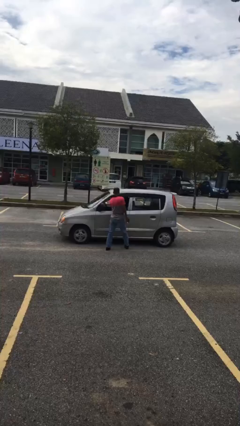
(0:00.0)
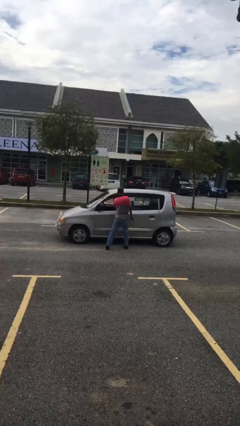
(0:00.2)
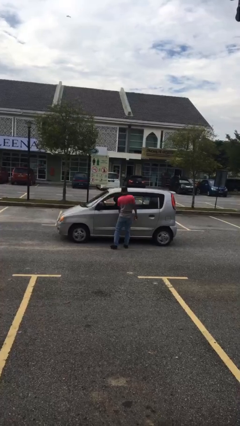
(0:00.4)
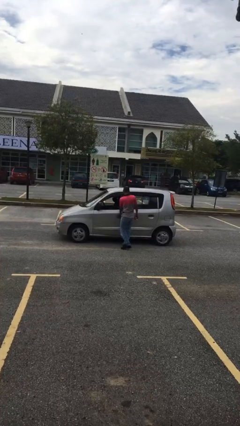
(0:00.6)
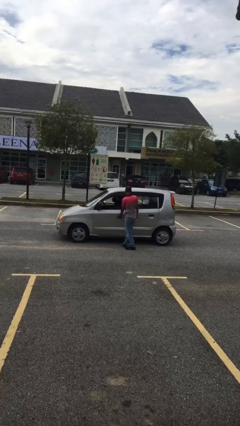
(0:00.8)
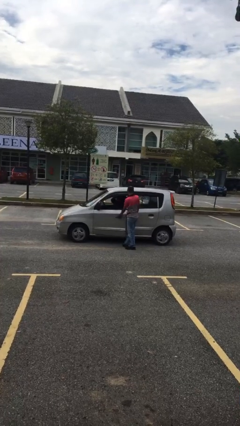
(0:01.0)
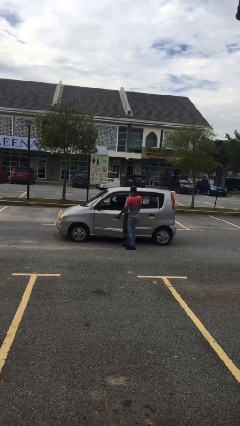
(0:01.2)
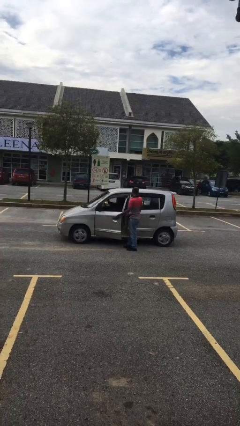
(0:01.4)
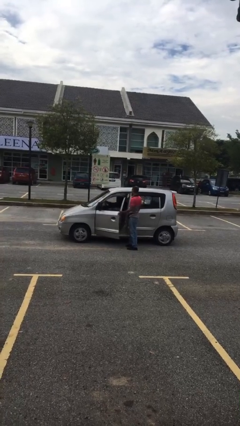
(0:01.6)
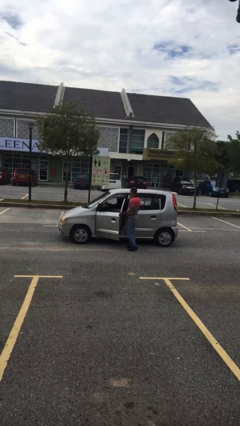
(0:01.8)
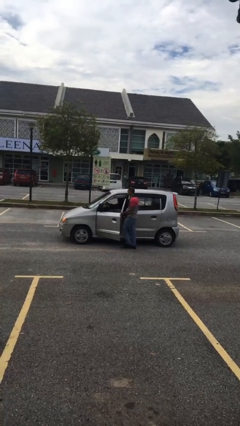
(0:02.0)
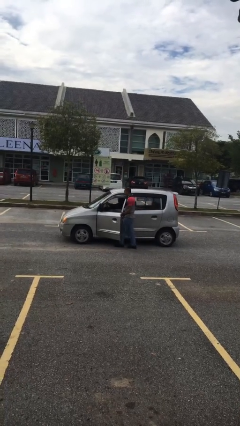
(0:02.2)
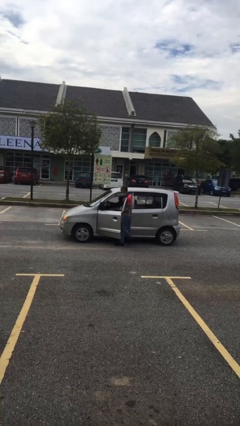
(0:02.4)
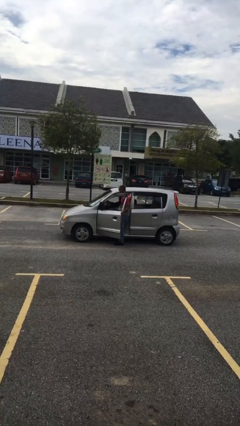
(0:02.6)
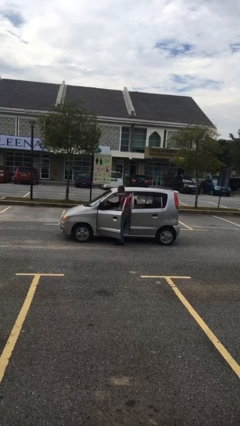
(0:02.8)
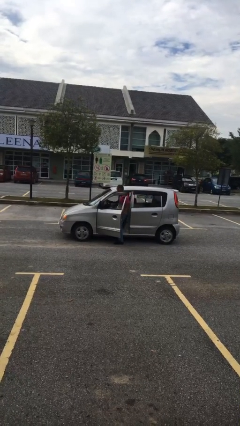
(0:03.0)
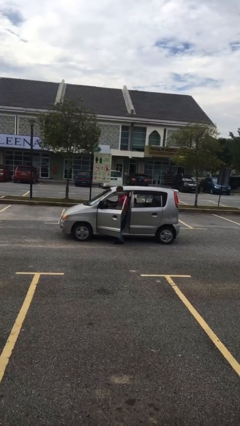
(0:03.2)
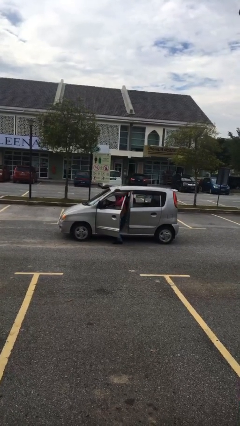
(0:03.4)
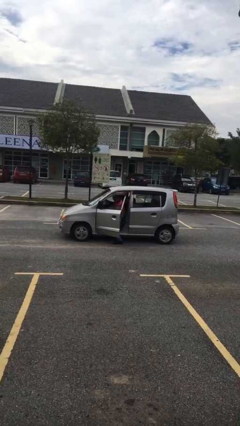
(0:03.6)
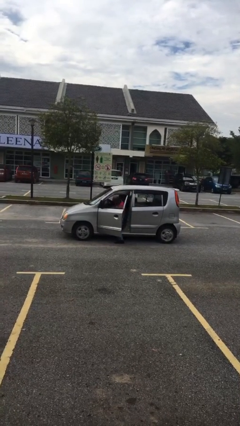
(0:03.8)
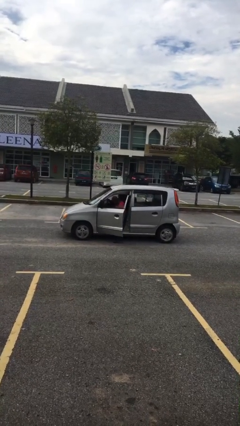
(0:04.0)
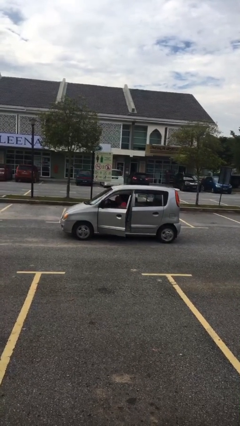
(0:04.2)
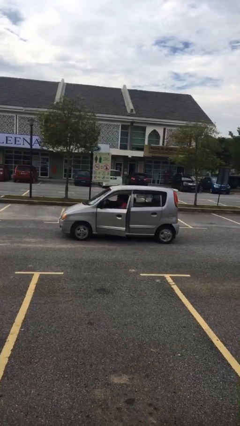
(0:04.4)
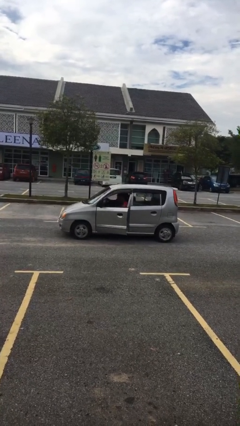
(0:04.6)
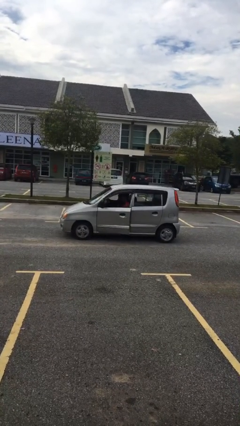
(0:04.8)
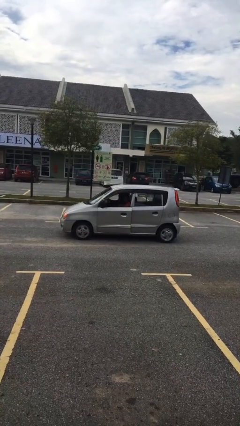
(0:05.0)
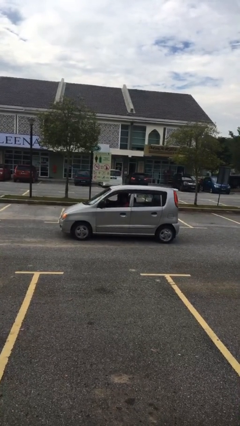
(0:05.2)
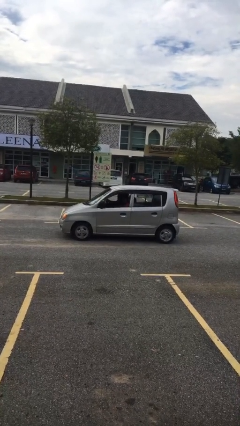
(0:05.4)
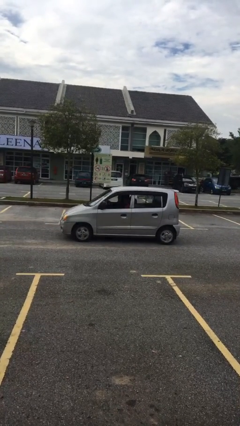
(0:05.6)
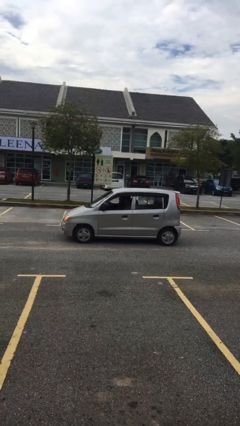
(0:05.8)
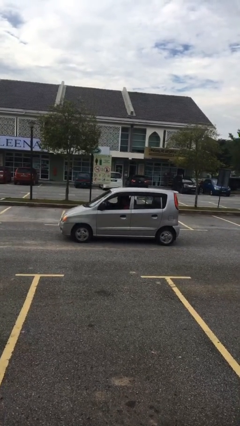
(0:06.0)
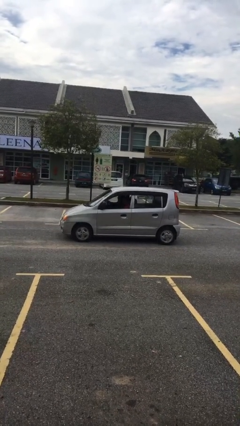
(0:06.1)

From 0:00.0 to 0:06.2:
car picks up person

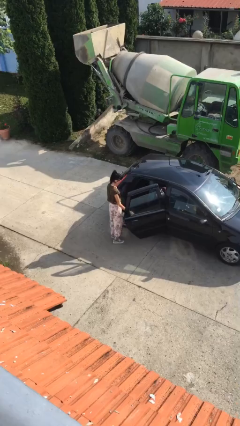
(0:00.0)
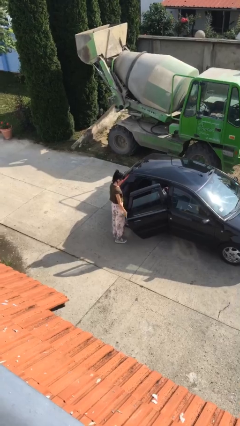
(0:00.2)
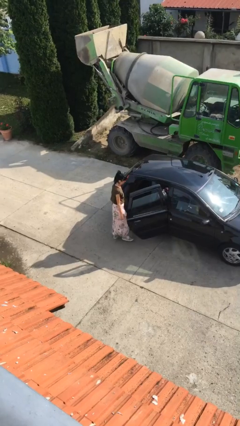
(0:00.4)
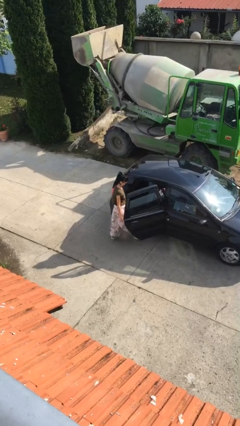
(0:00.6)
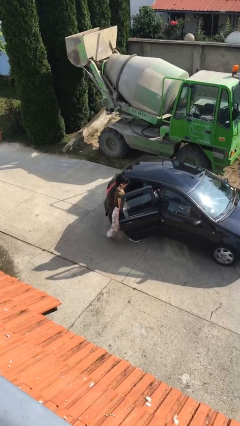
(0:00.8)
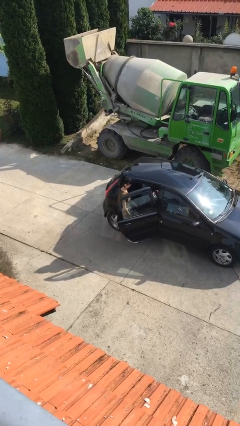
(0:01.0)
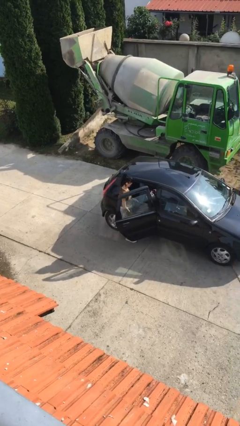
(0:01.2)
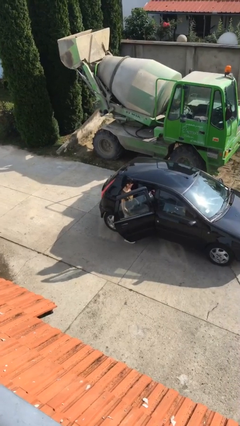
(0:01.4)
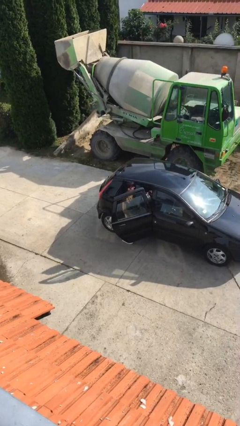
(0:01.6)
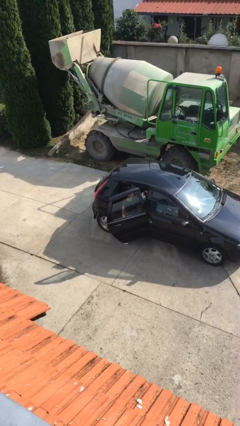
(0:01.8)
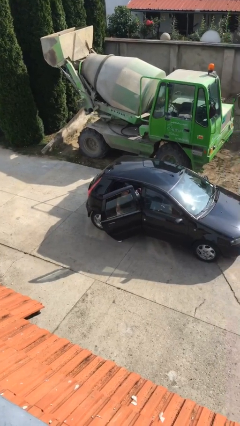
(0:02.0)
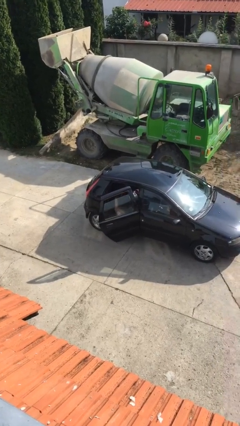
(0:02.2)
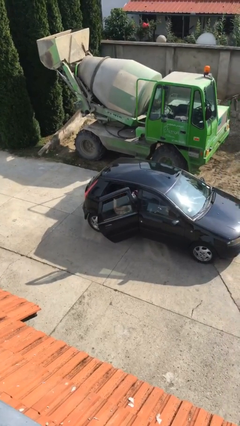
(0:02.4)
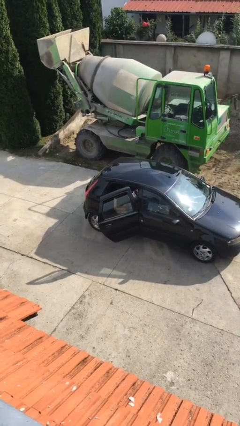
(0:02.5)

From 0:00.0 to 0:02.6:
person enters car

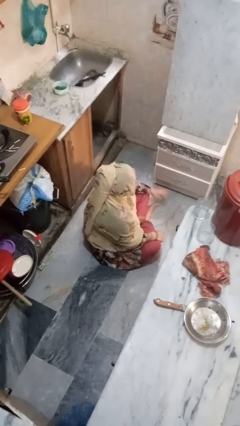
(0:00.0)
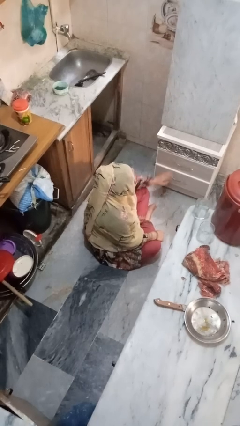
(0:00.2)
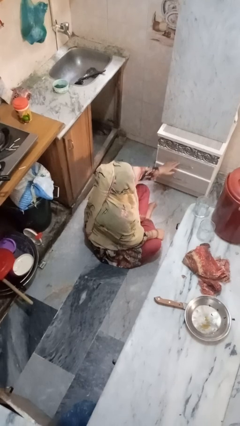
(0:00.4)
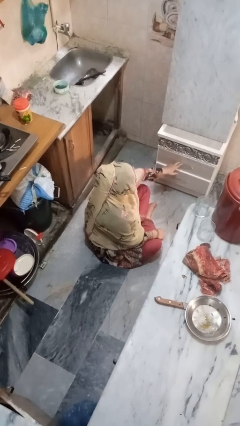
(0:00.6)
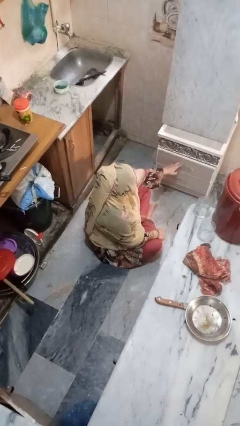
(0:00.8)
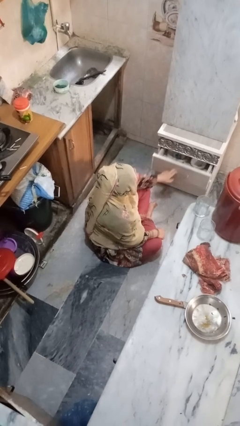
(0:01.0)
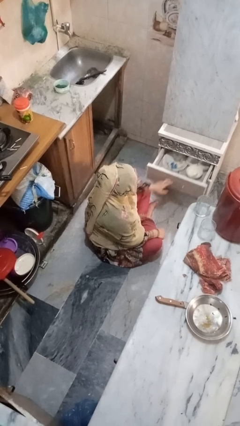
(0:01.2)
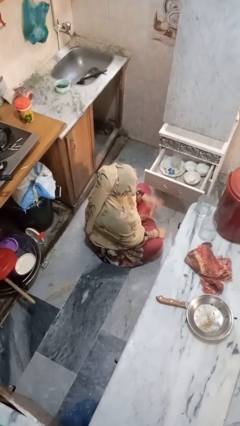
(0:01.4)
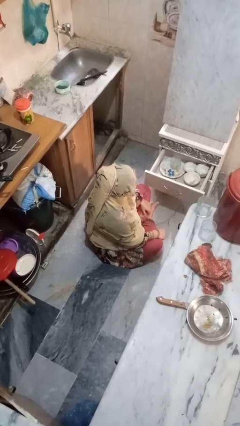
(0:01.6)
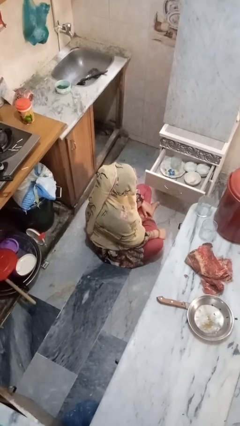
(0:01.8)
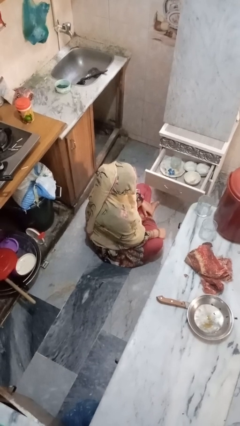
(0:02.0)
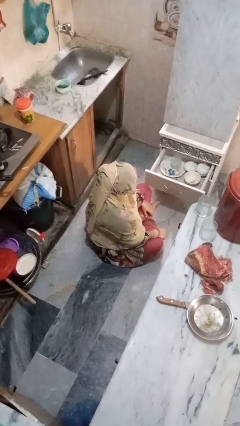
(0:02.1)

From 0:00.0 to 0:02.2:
person opens kitchen drawer

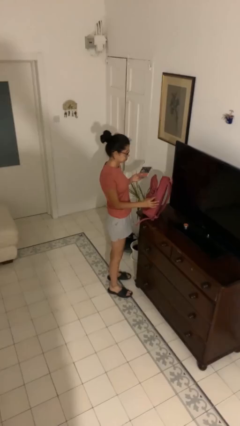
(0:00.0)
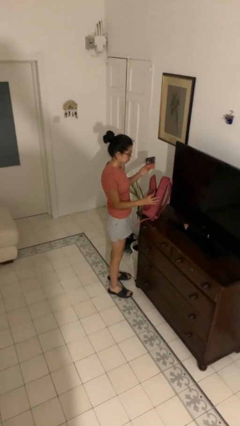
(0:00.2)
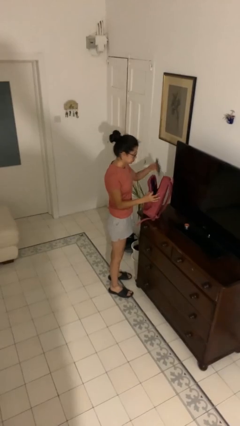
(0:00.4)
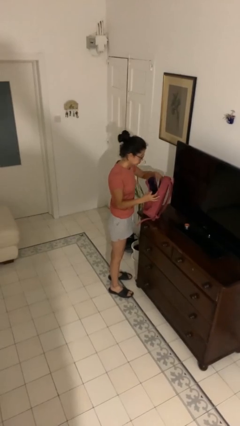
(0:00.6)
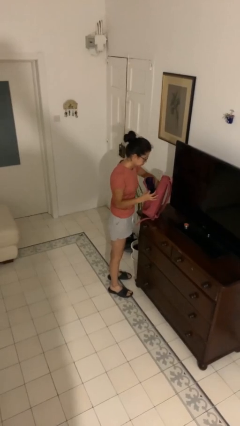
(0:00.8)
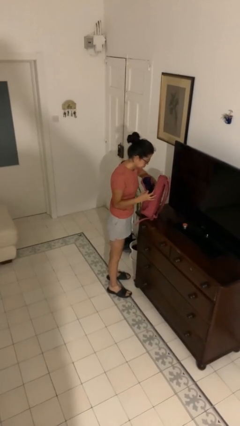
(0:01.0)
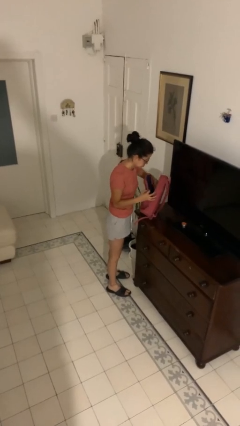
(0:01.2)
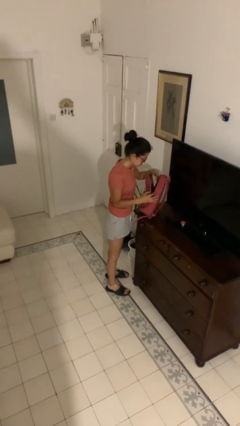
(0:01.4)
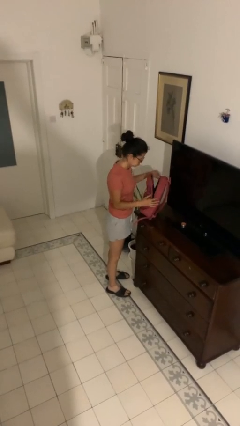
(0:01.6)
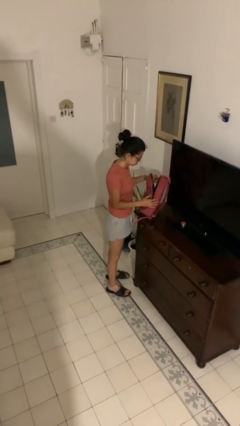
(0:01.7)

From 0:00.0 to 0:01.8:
person puts object into backpack

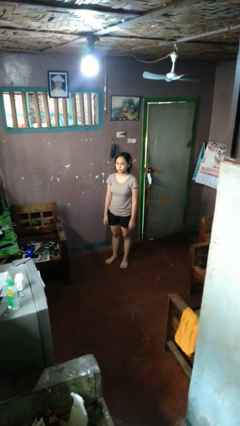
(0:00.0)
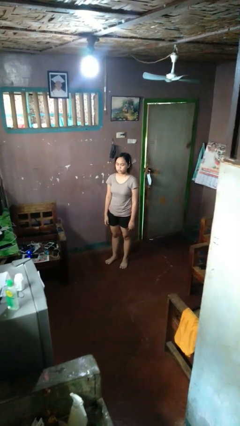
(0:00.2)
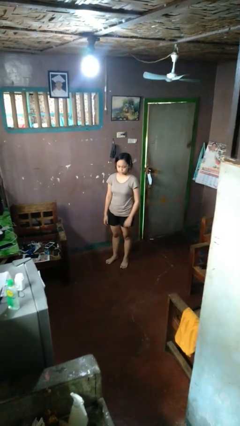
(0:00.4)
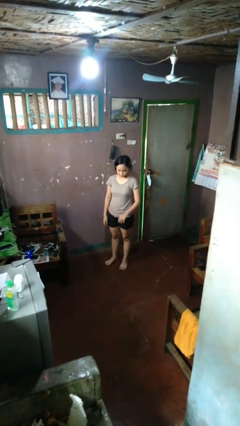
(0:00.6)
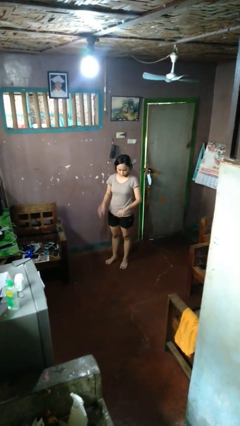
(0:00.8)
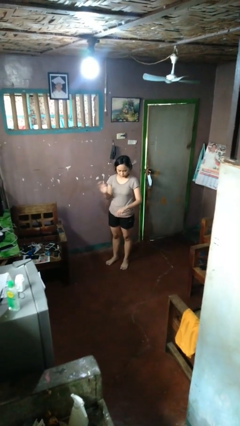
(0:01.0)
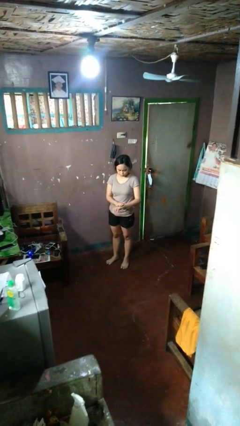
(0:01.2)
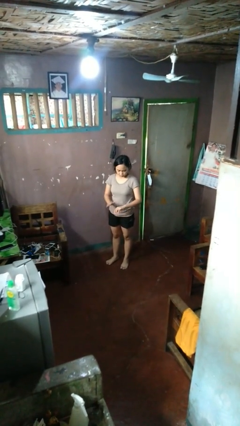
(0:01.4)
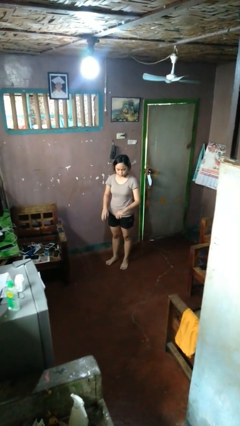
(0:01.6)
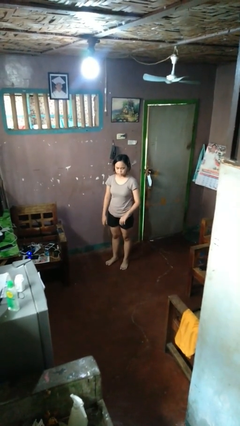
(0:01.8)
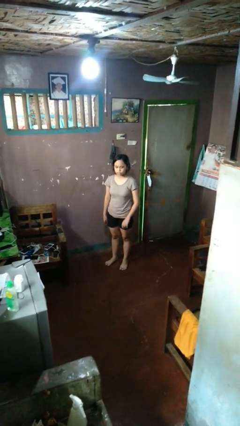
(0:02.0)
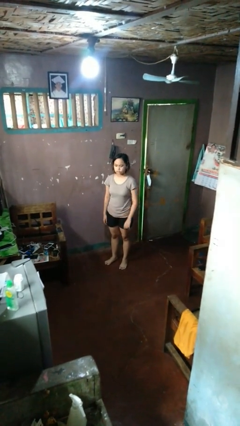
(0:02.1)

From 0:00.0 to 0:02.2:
person swats bug

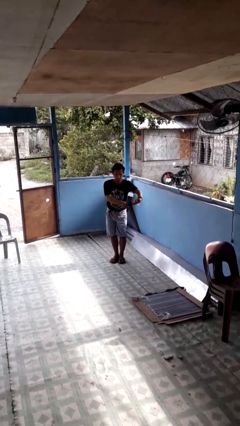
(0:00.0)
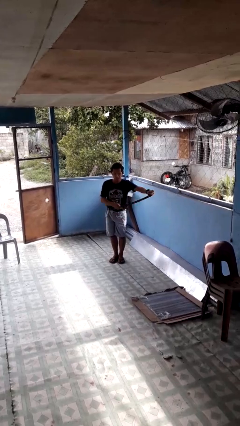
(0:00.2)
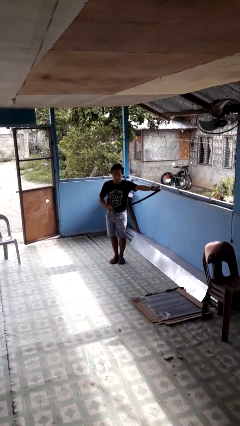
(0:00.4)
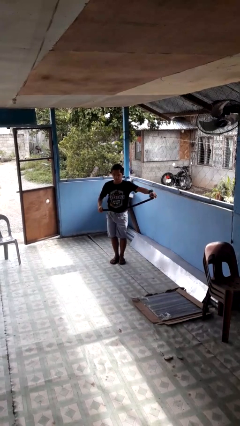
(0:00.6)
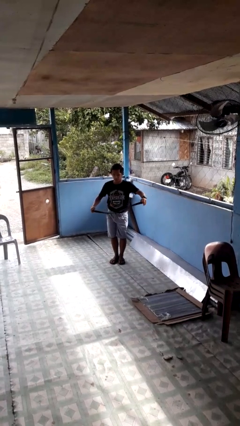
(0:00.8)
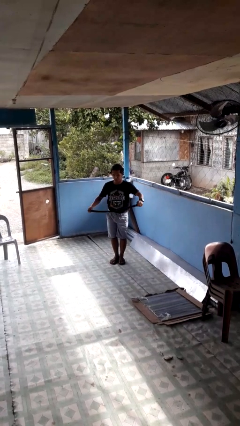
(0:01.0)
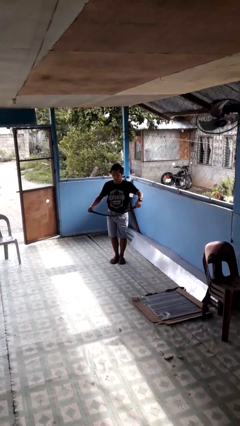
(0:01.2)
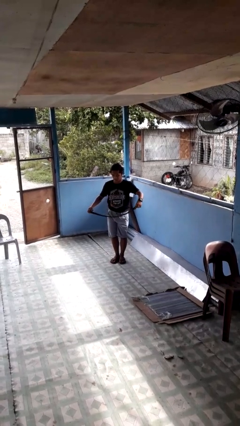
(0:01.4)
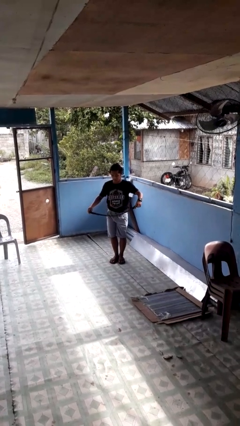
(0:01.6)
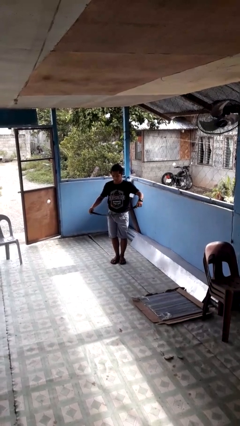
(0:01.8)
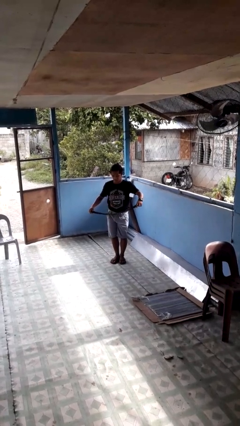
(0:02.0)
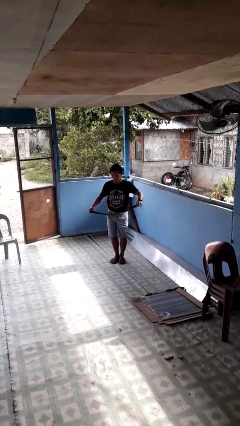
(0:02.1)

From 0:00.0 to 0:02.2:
person takes off belt

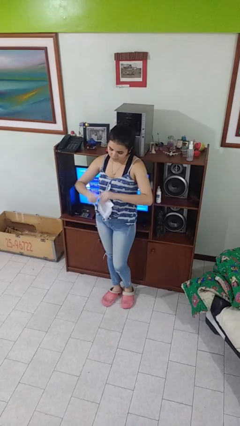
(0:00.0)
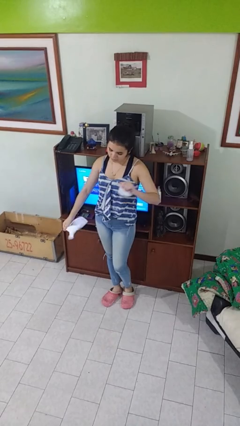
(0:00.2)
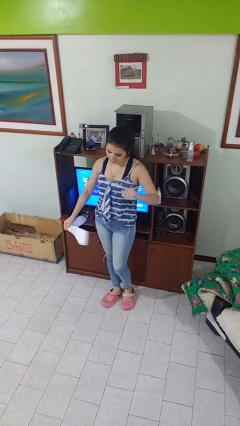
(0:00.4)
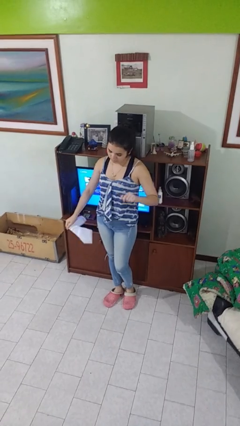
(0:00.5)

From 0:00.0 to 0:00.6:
person tears paper
